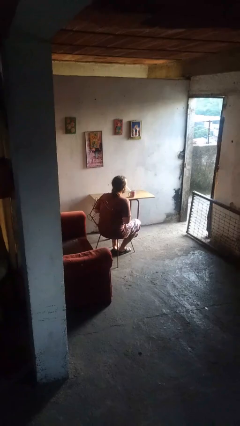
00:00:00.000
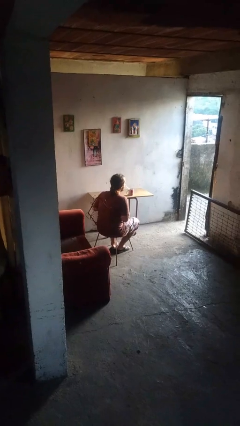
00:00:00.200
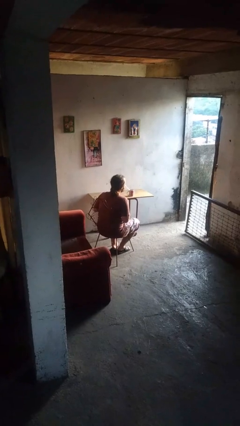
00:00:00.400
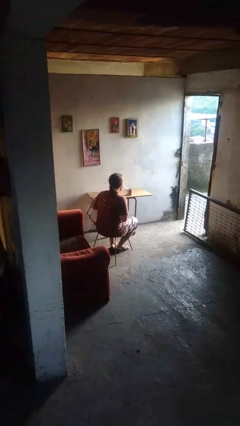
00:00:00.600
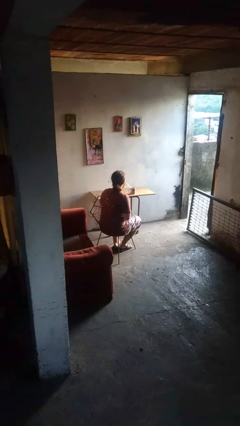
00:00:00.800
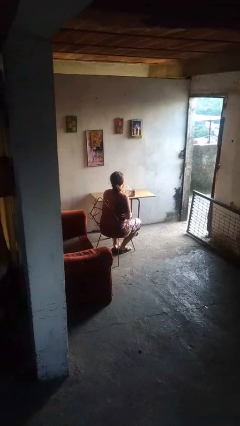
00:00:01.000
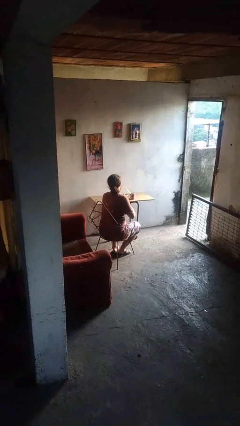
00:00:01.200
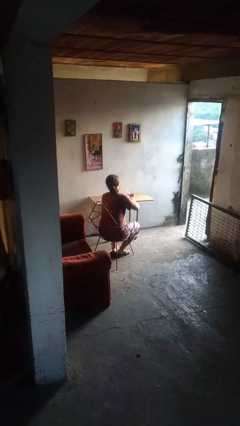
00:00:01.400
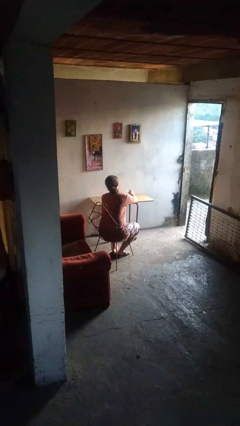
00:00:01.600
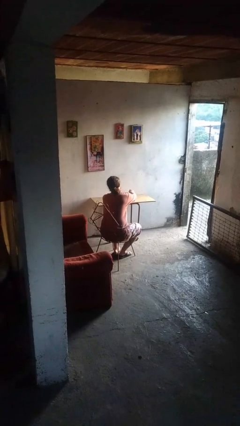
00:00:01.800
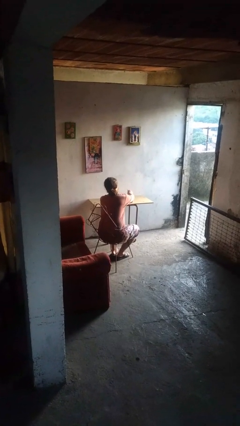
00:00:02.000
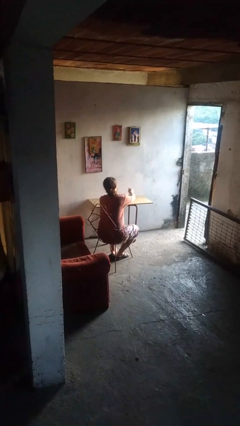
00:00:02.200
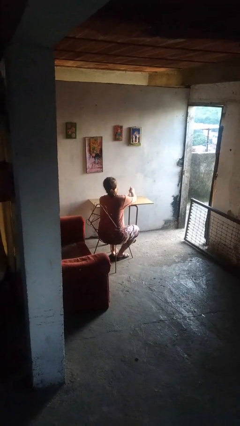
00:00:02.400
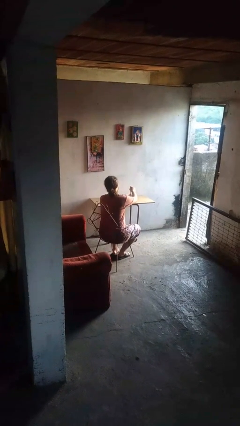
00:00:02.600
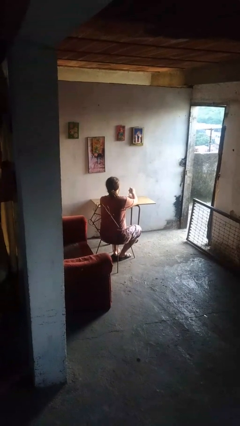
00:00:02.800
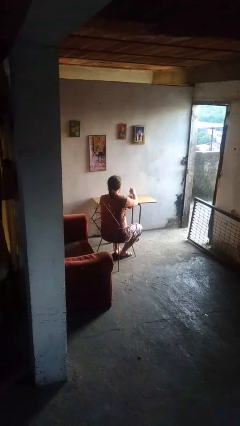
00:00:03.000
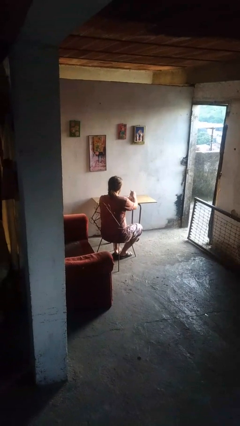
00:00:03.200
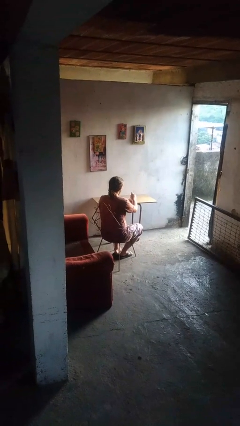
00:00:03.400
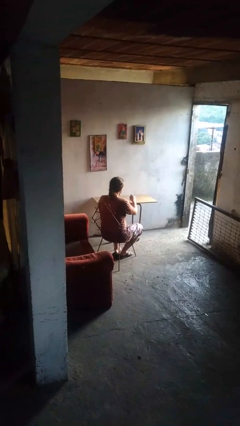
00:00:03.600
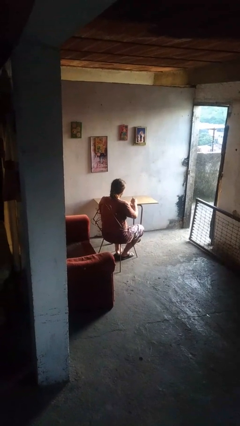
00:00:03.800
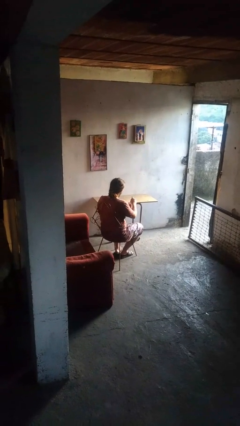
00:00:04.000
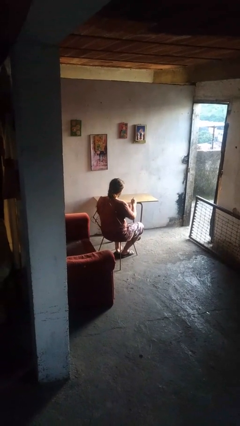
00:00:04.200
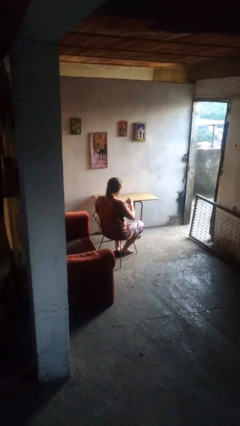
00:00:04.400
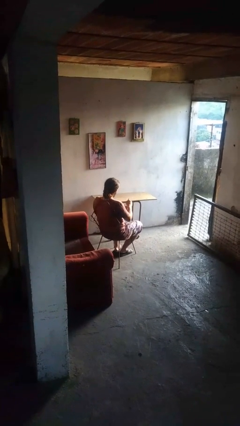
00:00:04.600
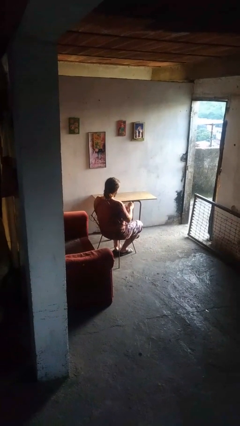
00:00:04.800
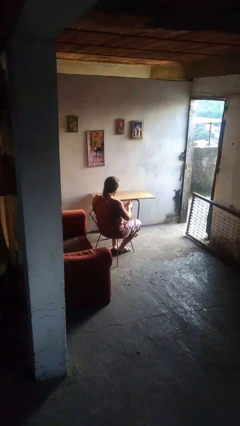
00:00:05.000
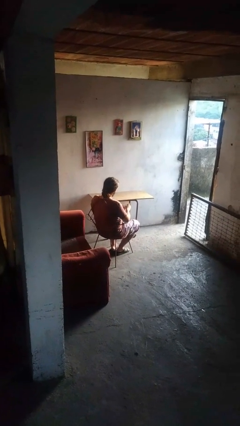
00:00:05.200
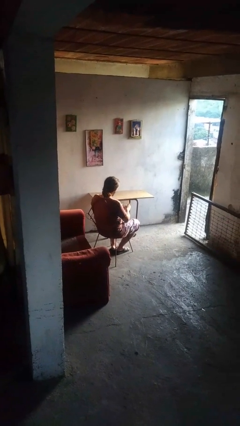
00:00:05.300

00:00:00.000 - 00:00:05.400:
person stirs mug

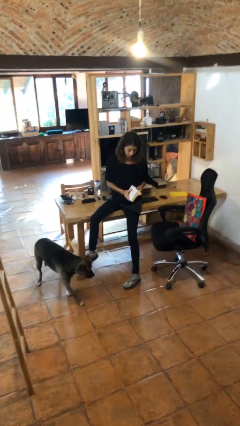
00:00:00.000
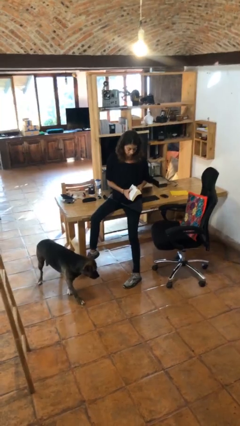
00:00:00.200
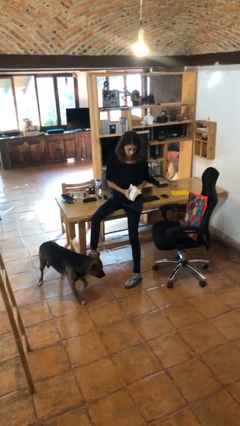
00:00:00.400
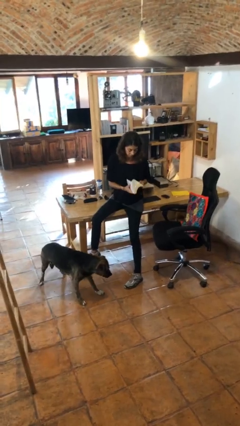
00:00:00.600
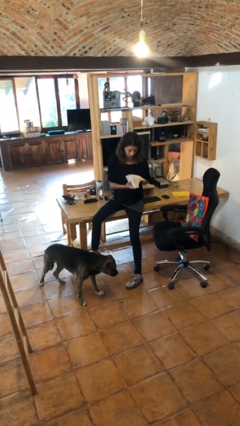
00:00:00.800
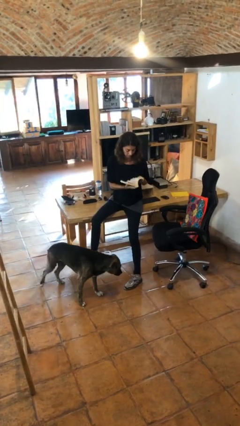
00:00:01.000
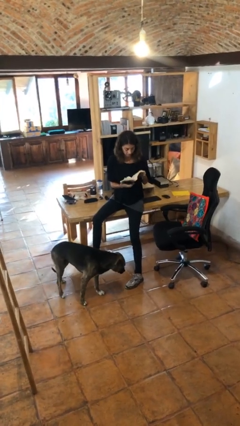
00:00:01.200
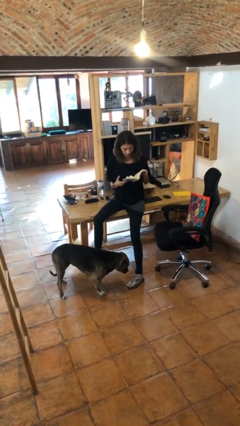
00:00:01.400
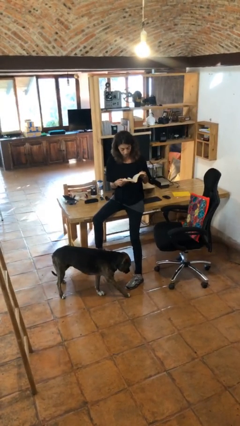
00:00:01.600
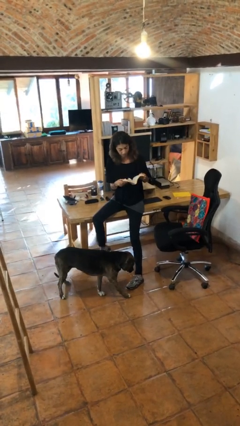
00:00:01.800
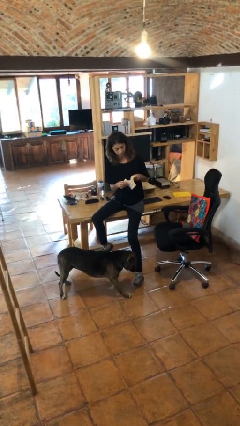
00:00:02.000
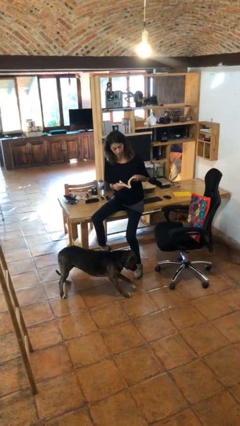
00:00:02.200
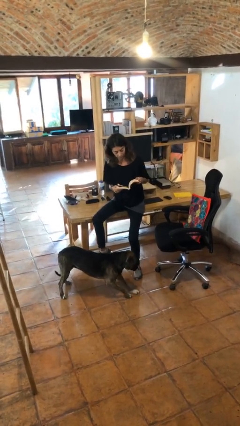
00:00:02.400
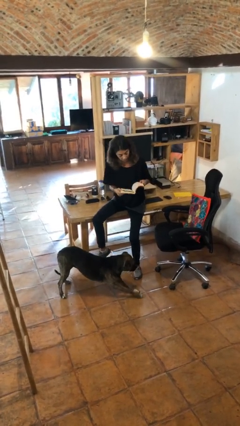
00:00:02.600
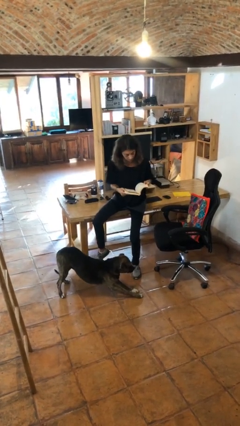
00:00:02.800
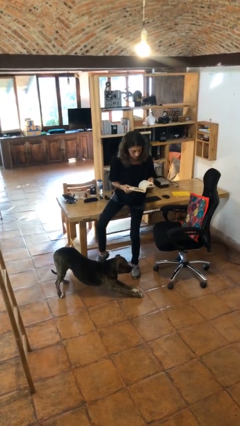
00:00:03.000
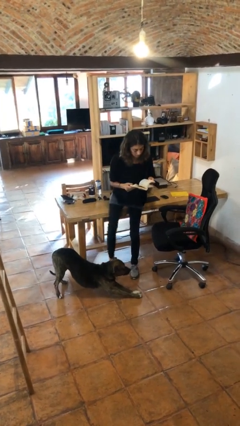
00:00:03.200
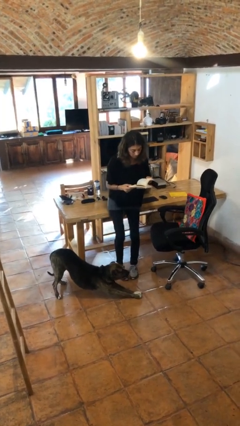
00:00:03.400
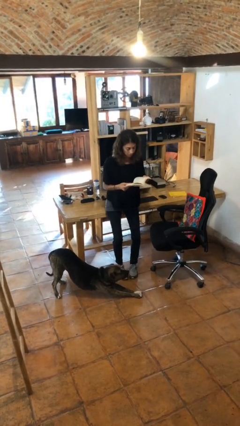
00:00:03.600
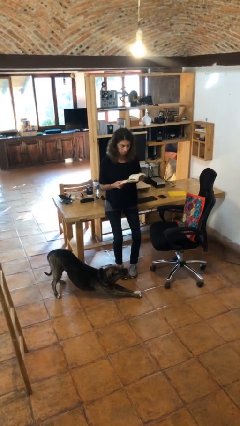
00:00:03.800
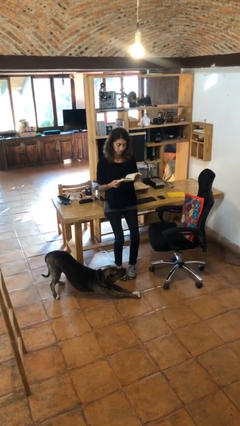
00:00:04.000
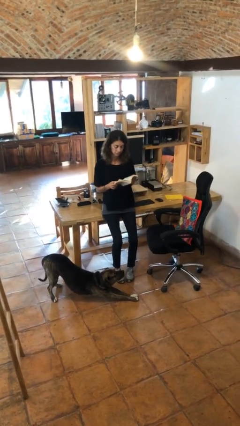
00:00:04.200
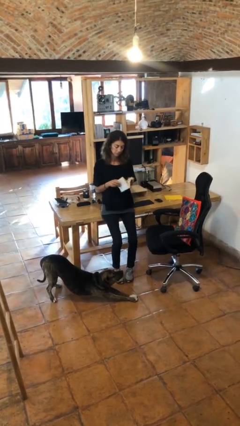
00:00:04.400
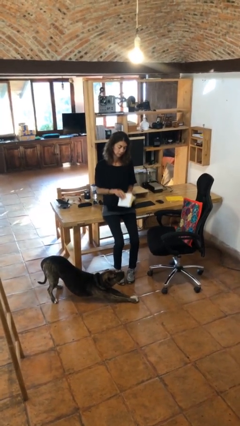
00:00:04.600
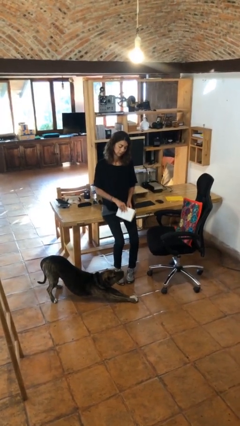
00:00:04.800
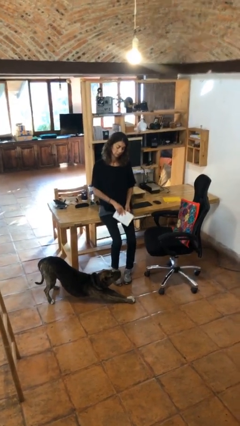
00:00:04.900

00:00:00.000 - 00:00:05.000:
person reads book

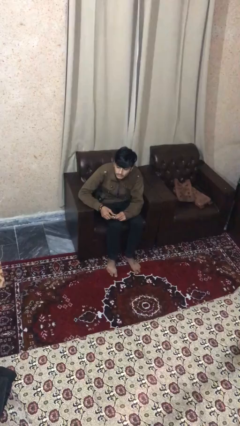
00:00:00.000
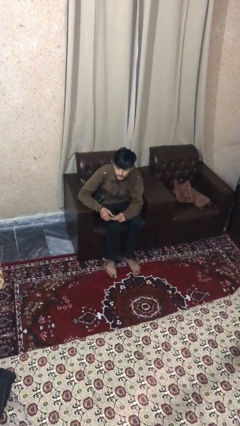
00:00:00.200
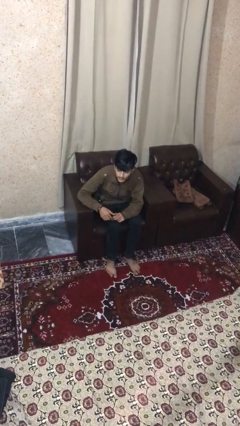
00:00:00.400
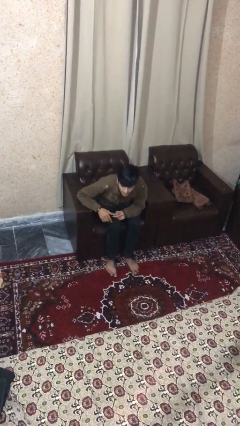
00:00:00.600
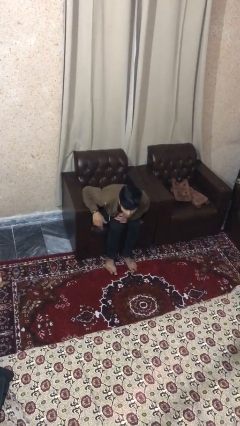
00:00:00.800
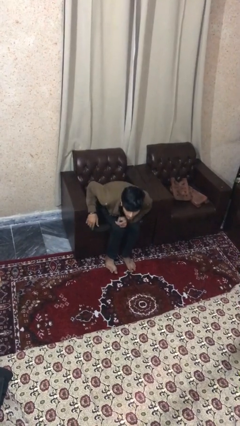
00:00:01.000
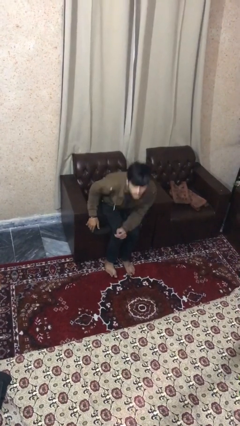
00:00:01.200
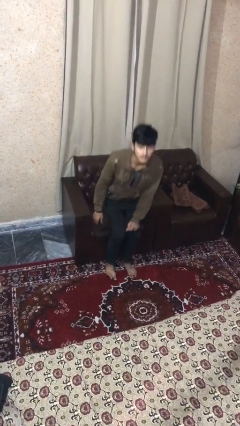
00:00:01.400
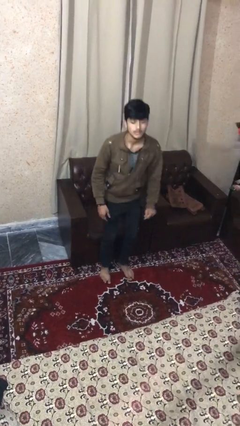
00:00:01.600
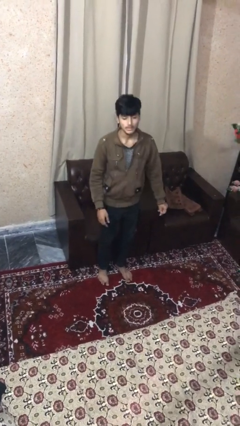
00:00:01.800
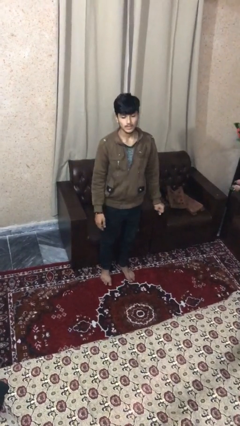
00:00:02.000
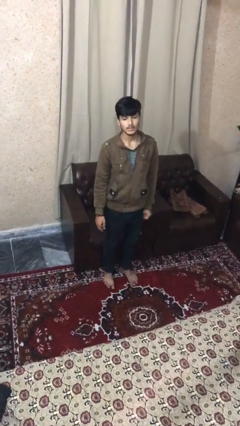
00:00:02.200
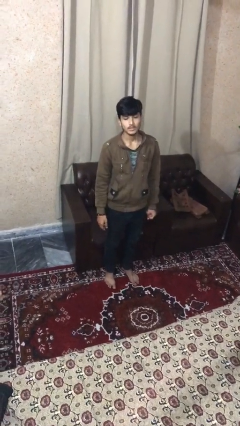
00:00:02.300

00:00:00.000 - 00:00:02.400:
person stands up

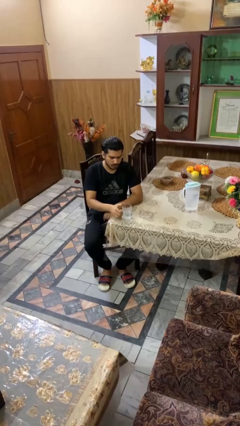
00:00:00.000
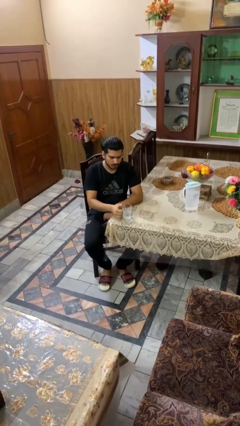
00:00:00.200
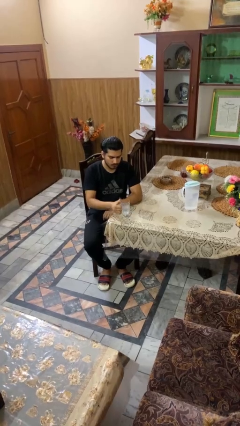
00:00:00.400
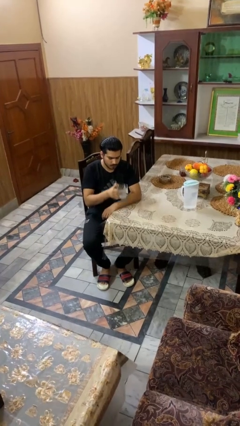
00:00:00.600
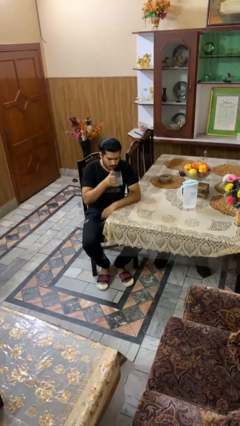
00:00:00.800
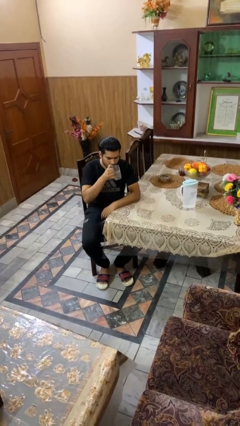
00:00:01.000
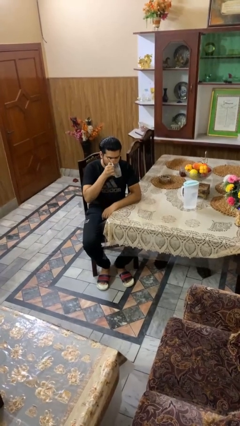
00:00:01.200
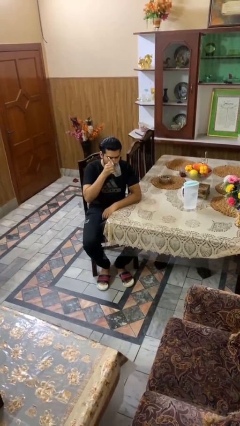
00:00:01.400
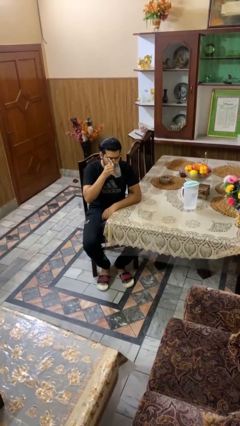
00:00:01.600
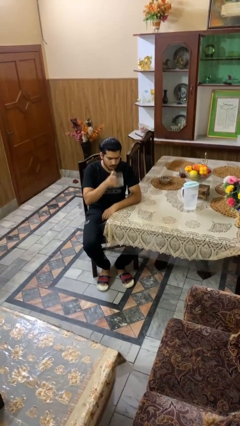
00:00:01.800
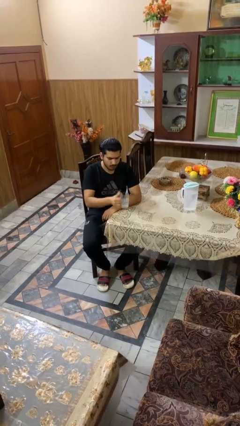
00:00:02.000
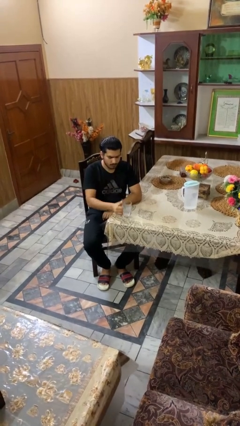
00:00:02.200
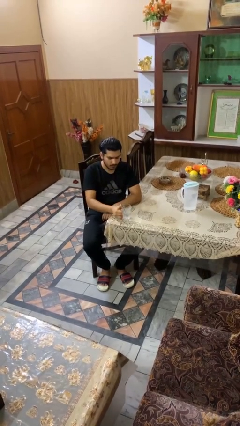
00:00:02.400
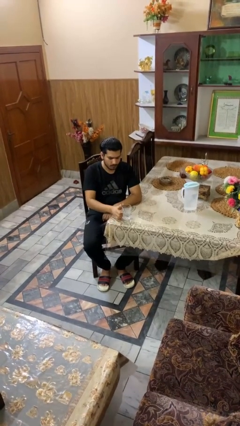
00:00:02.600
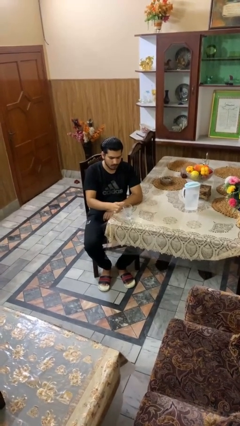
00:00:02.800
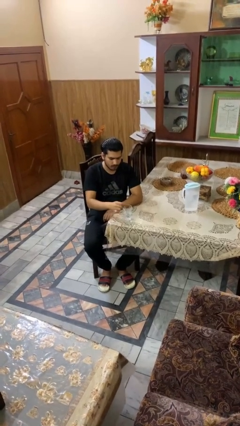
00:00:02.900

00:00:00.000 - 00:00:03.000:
person drinks from mug

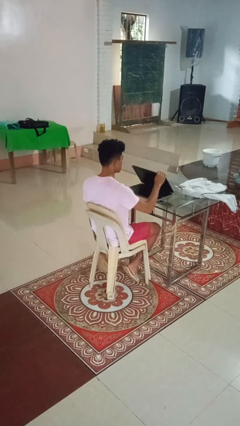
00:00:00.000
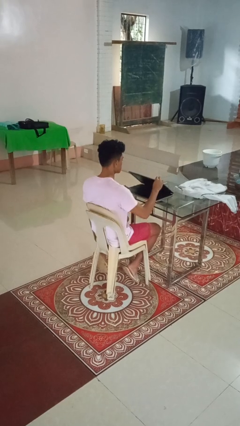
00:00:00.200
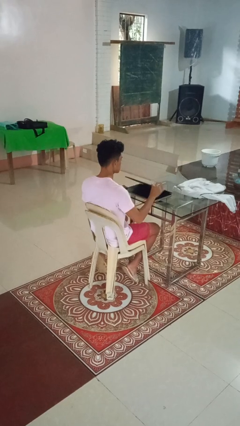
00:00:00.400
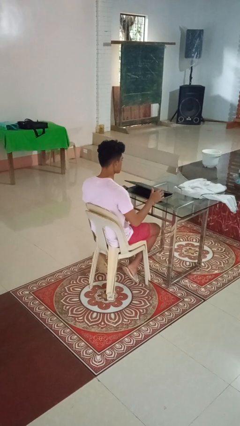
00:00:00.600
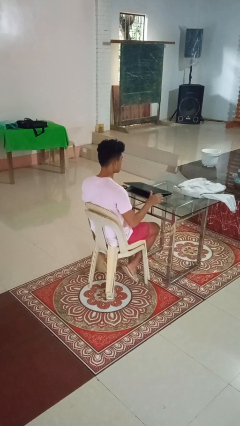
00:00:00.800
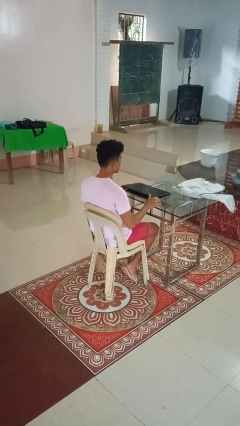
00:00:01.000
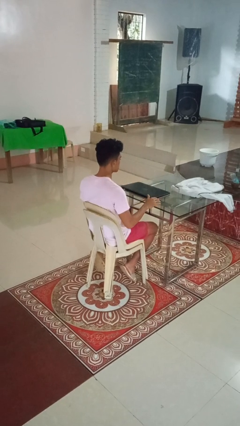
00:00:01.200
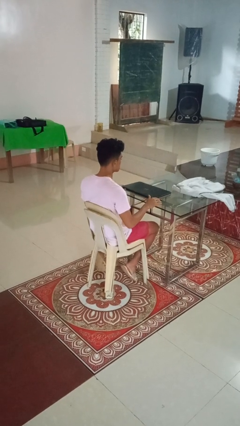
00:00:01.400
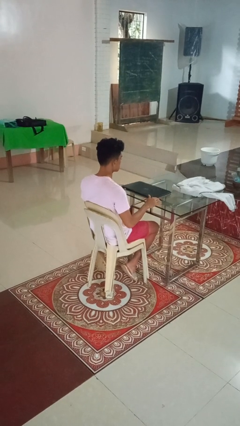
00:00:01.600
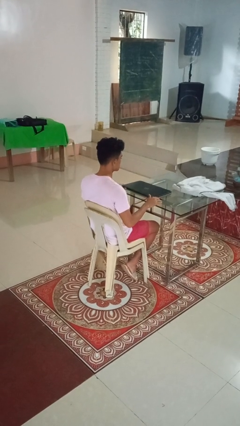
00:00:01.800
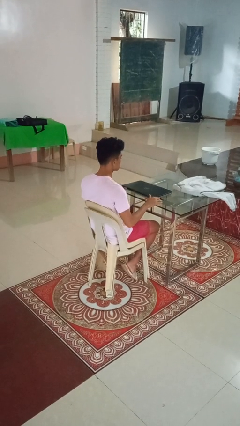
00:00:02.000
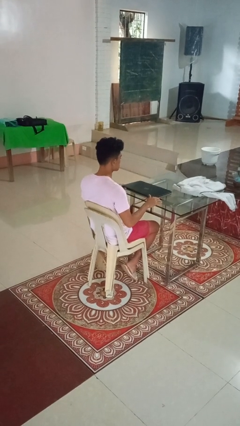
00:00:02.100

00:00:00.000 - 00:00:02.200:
person closes laptop
